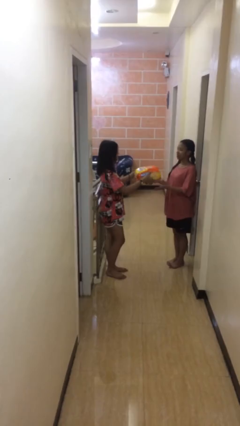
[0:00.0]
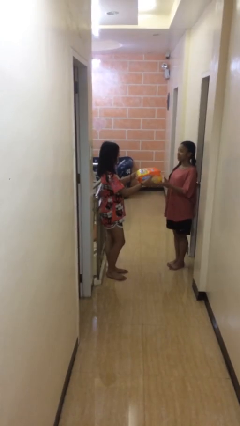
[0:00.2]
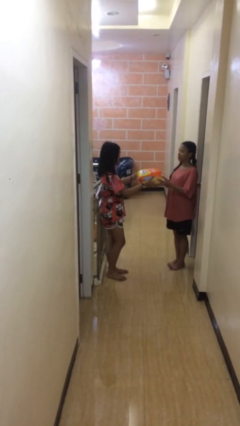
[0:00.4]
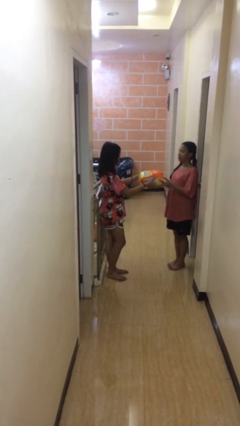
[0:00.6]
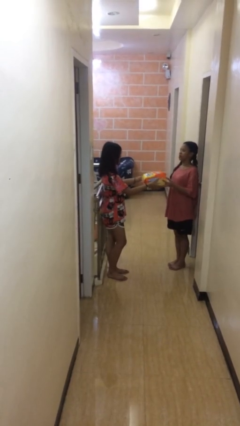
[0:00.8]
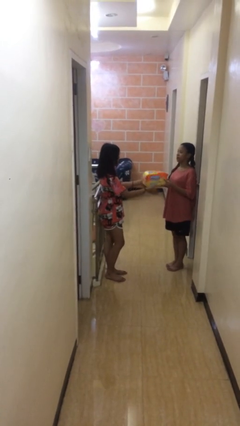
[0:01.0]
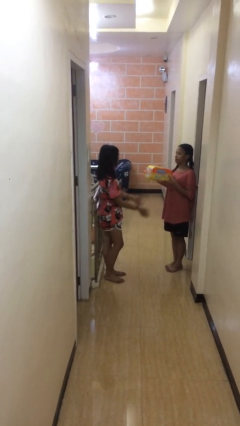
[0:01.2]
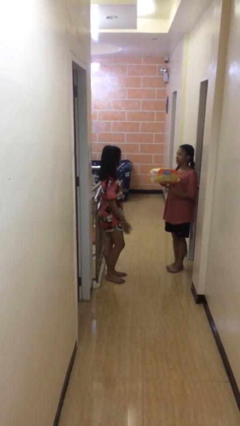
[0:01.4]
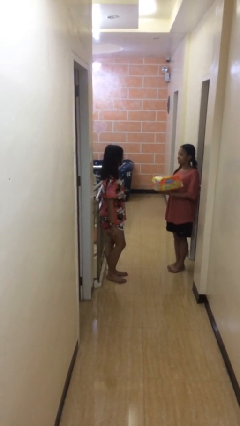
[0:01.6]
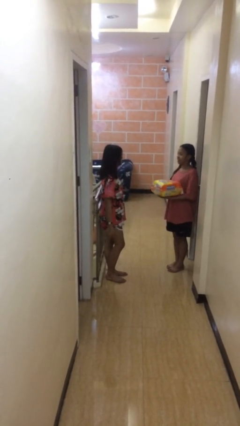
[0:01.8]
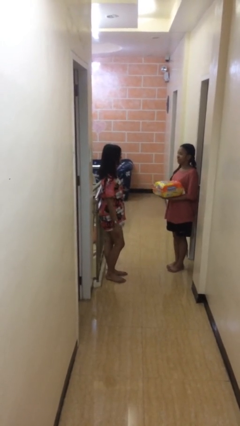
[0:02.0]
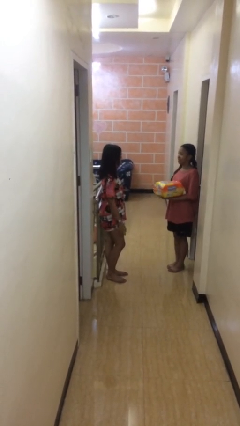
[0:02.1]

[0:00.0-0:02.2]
person transfers object to person

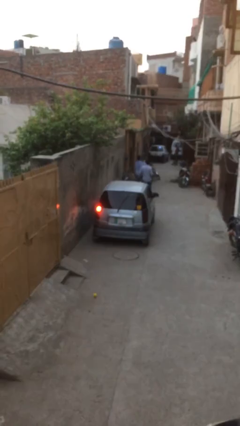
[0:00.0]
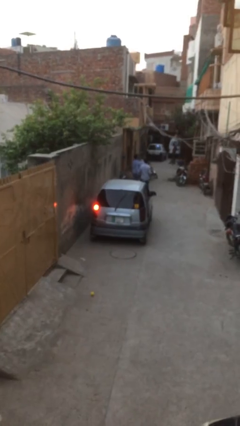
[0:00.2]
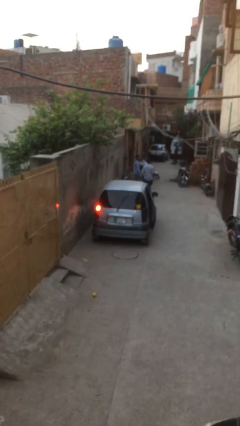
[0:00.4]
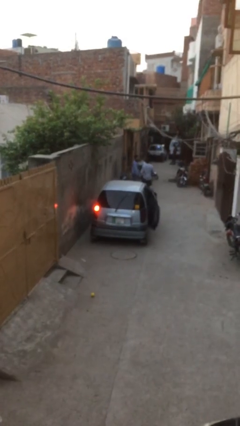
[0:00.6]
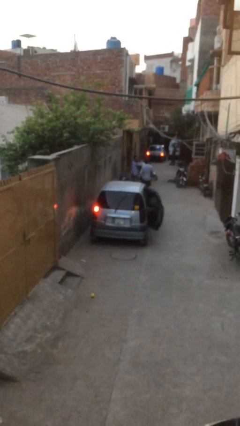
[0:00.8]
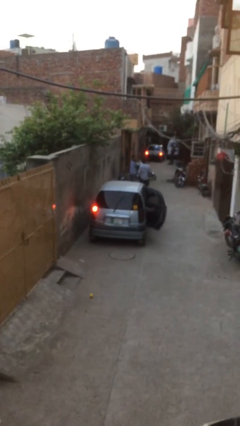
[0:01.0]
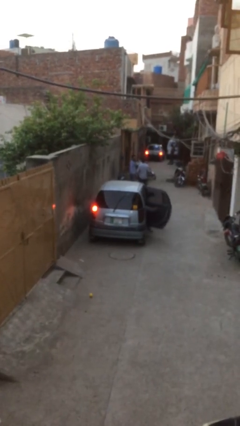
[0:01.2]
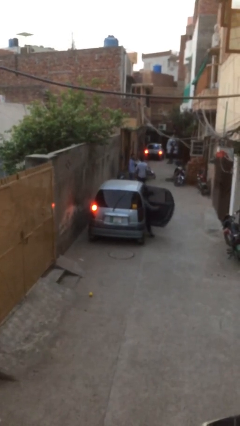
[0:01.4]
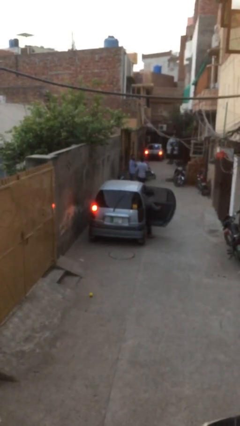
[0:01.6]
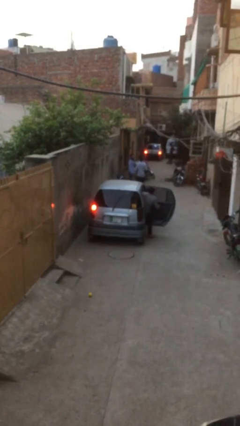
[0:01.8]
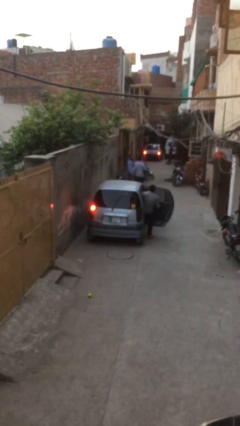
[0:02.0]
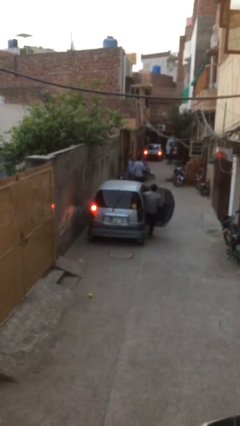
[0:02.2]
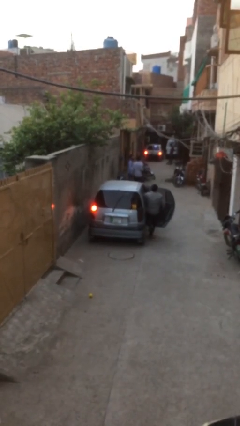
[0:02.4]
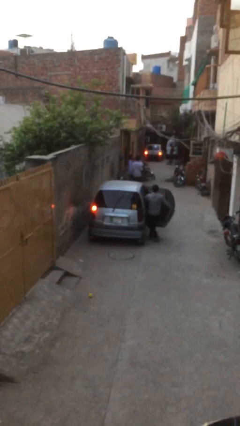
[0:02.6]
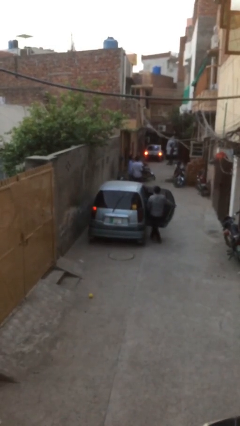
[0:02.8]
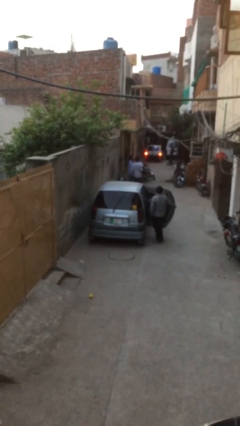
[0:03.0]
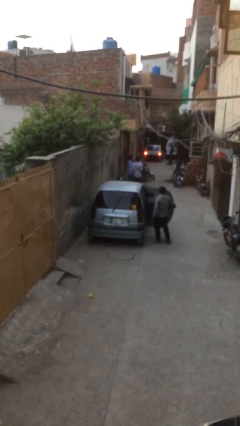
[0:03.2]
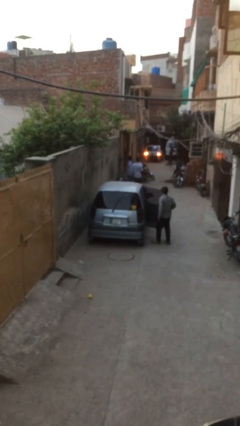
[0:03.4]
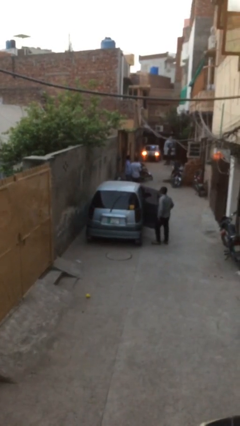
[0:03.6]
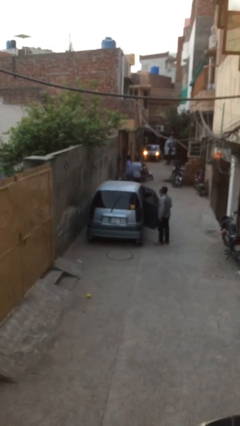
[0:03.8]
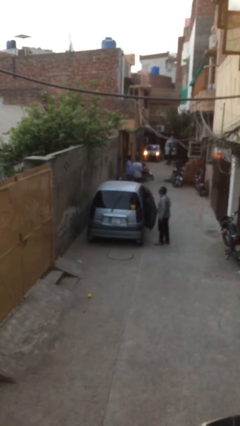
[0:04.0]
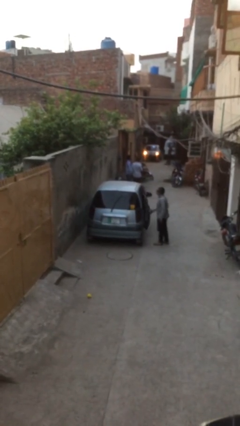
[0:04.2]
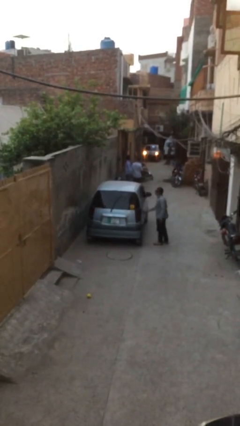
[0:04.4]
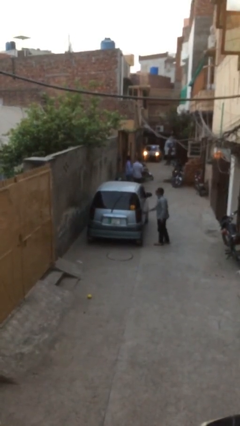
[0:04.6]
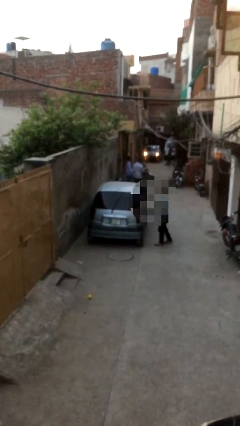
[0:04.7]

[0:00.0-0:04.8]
car drops off person

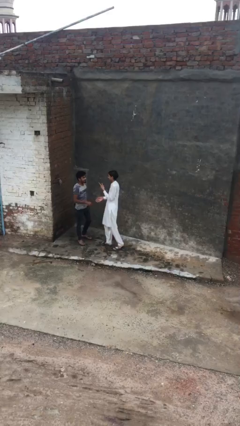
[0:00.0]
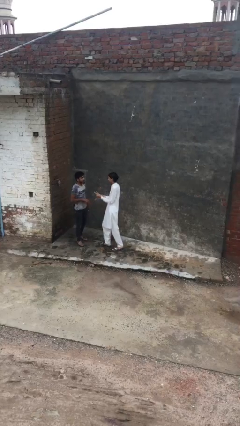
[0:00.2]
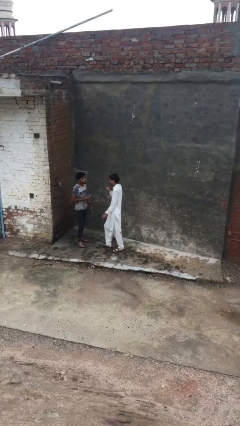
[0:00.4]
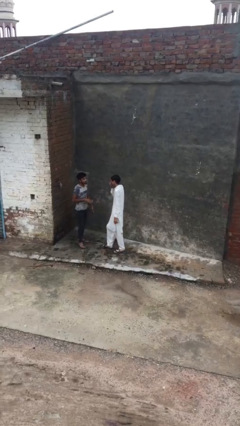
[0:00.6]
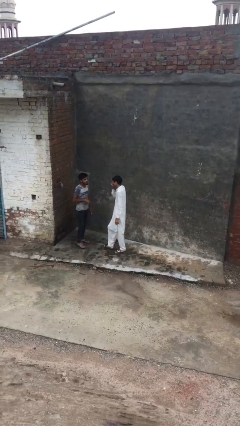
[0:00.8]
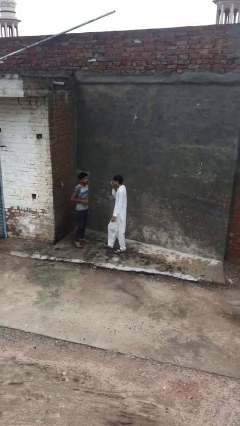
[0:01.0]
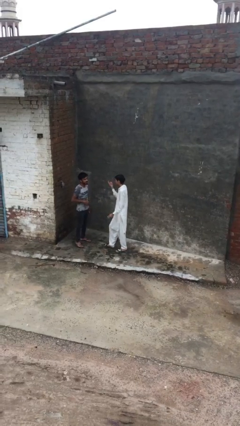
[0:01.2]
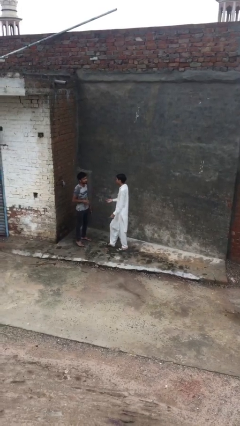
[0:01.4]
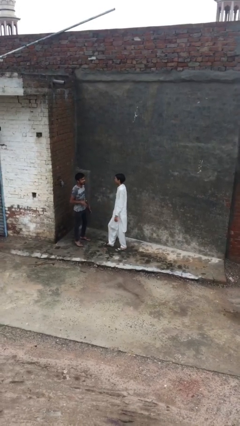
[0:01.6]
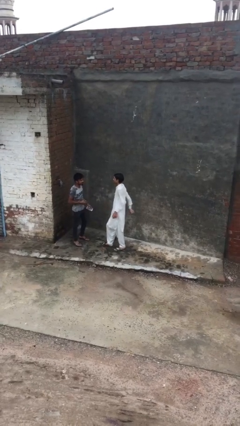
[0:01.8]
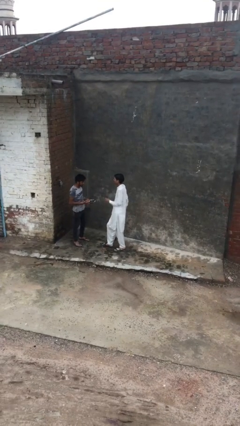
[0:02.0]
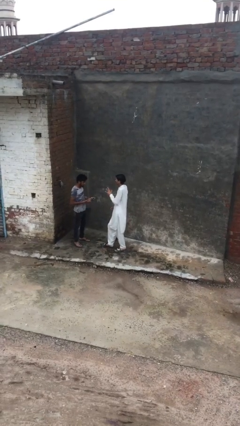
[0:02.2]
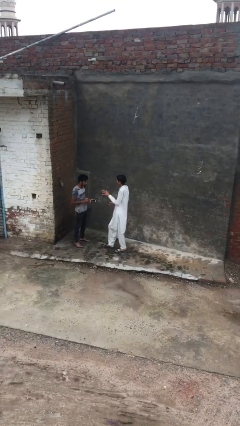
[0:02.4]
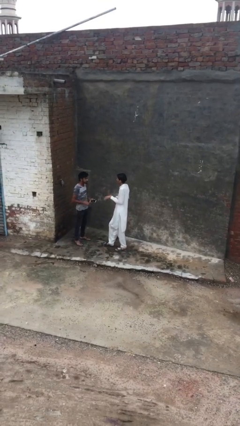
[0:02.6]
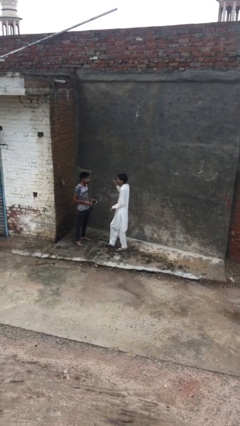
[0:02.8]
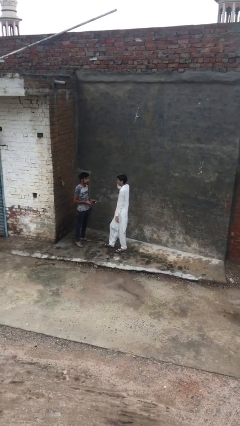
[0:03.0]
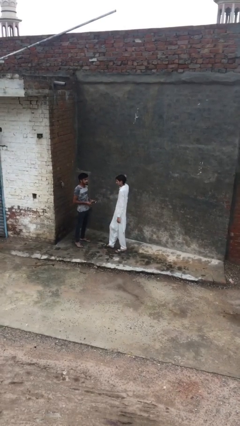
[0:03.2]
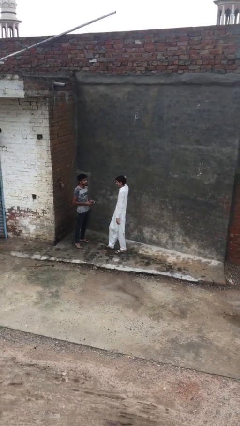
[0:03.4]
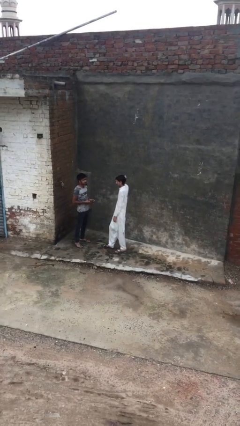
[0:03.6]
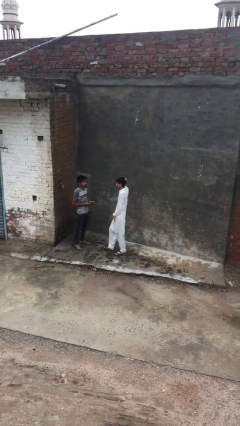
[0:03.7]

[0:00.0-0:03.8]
person talks to person

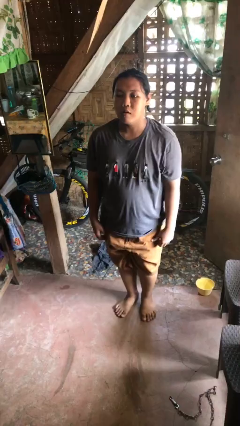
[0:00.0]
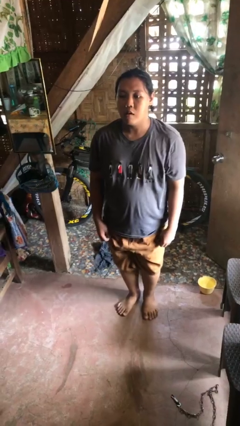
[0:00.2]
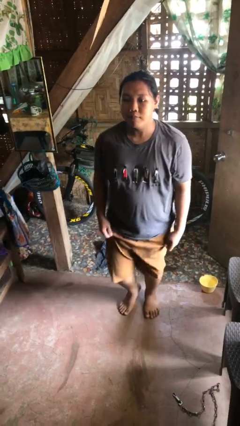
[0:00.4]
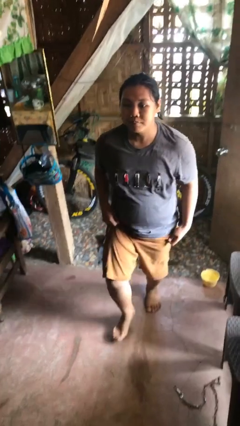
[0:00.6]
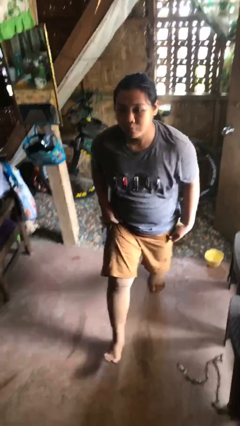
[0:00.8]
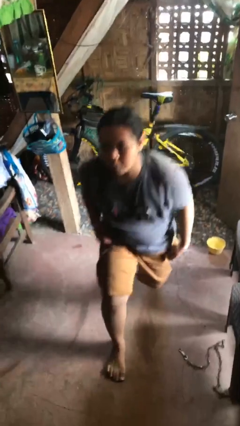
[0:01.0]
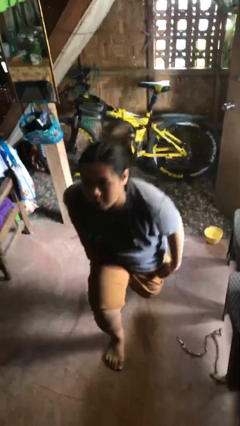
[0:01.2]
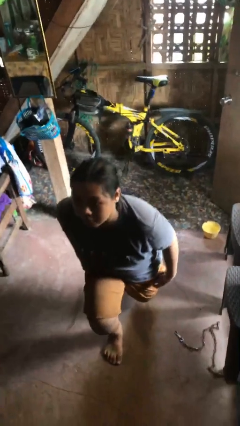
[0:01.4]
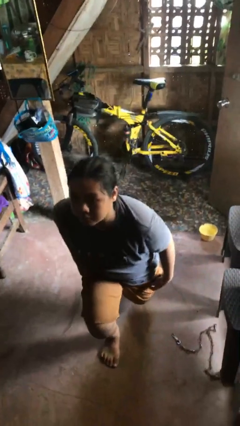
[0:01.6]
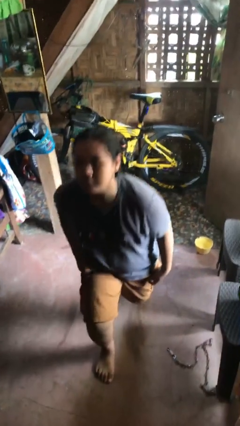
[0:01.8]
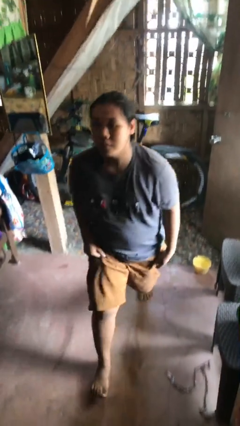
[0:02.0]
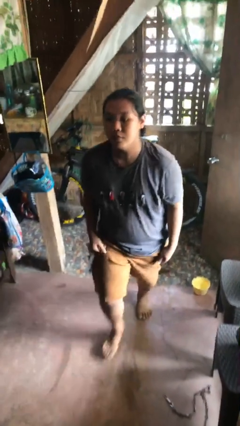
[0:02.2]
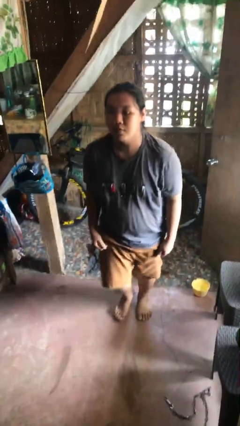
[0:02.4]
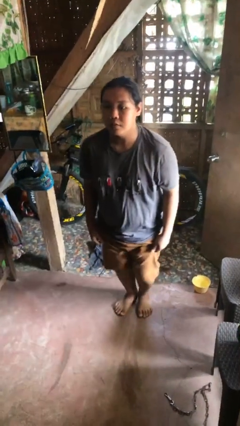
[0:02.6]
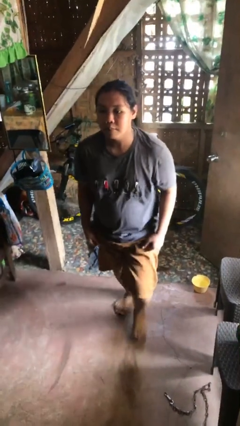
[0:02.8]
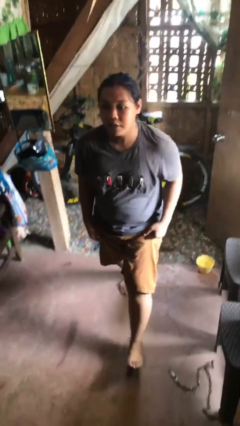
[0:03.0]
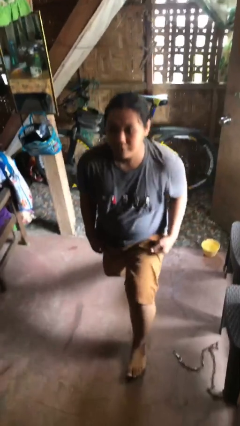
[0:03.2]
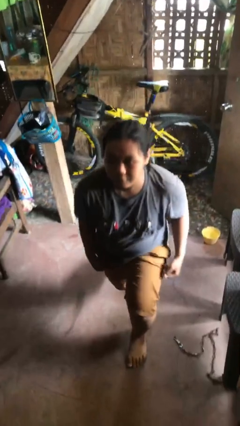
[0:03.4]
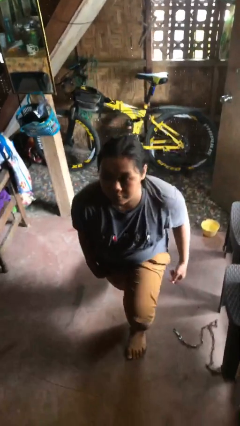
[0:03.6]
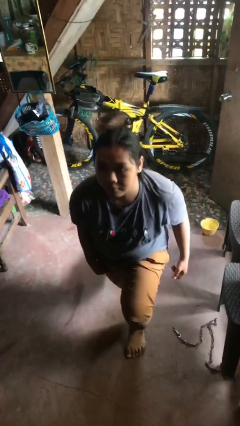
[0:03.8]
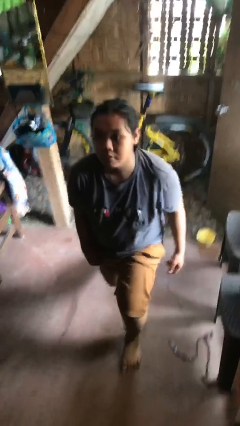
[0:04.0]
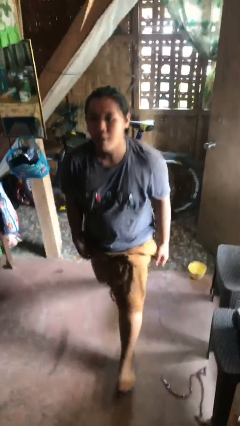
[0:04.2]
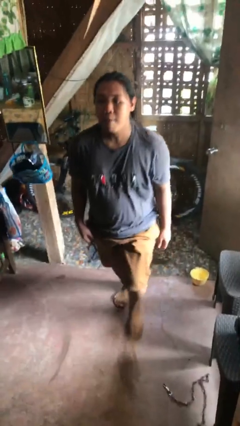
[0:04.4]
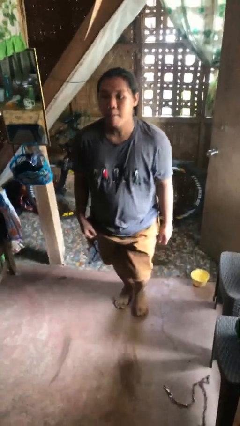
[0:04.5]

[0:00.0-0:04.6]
person exercises with lunges

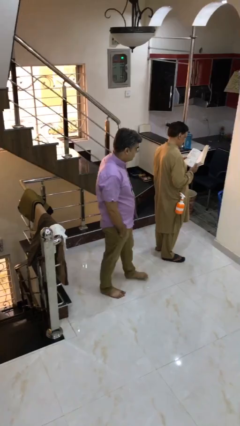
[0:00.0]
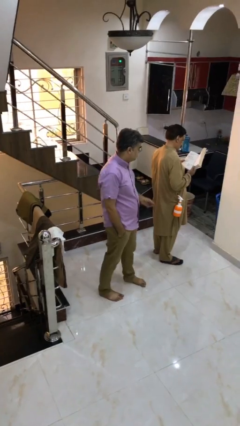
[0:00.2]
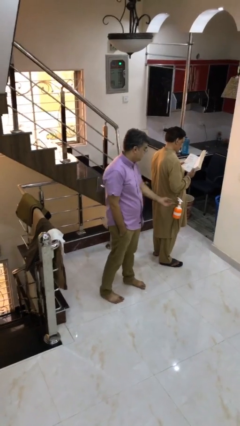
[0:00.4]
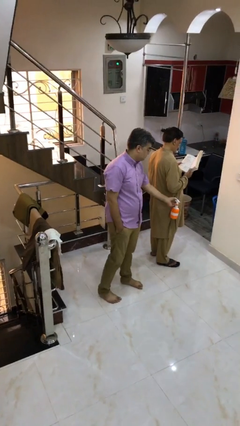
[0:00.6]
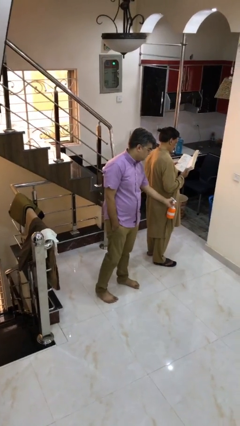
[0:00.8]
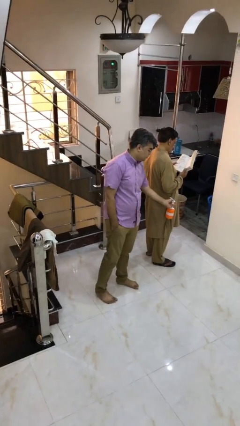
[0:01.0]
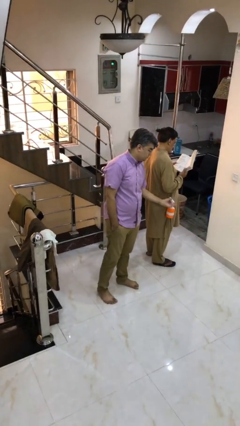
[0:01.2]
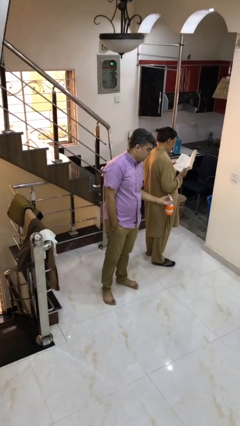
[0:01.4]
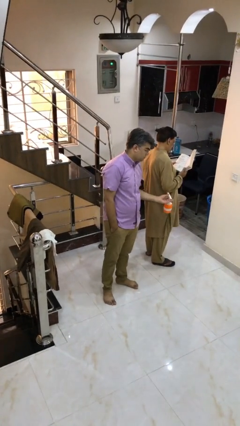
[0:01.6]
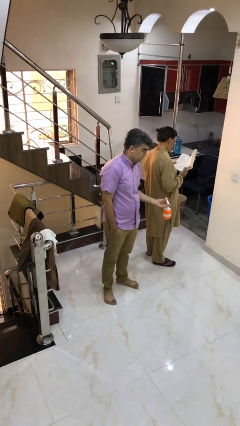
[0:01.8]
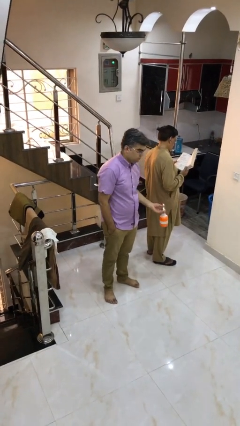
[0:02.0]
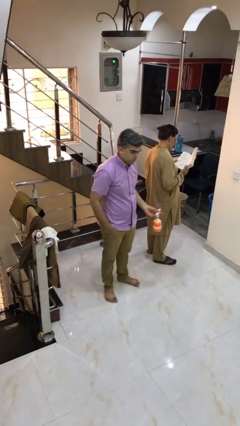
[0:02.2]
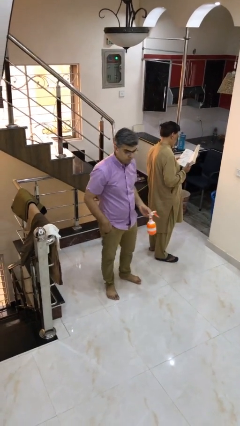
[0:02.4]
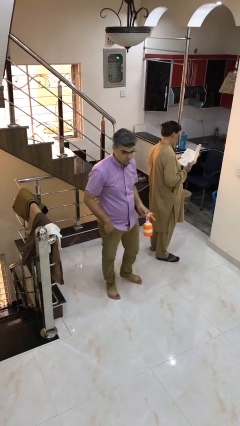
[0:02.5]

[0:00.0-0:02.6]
person steals object from person
